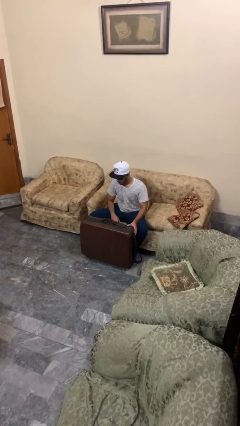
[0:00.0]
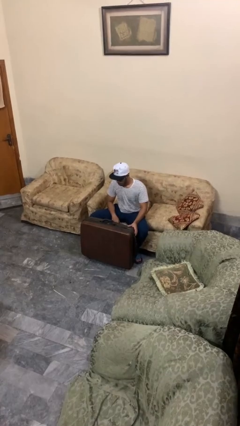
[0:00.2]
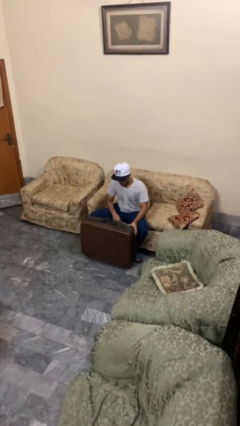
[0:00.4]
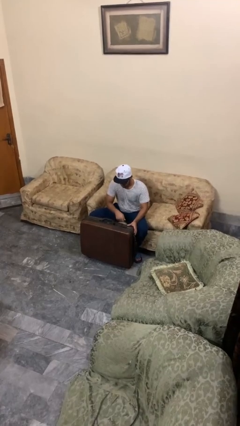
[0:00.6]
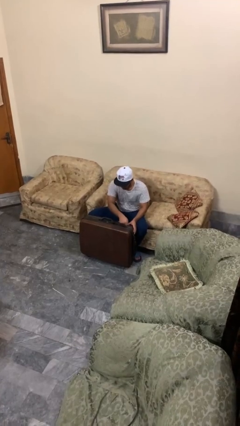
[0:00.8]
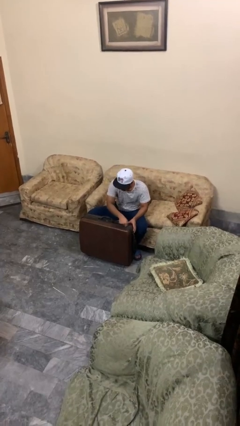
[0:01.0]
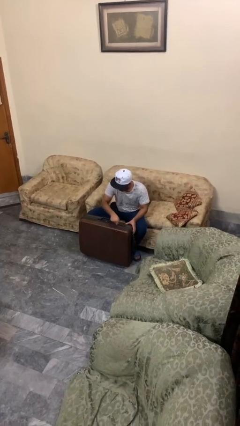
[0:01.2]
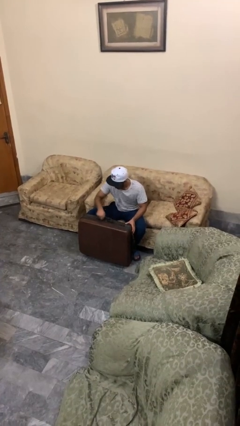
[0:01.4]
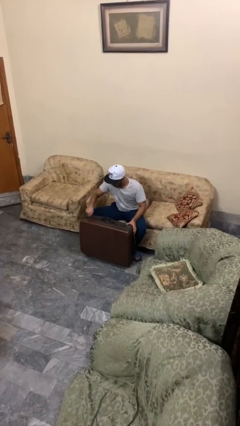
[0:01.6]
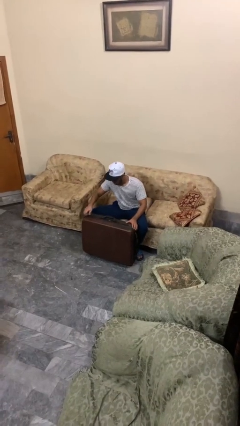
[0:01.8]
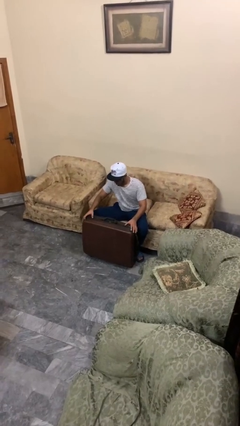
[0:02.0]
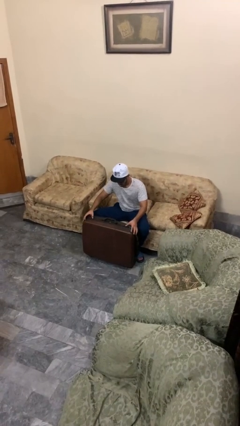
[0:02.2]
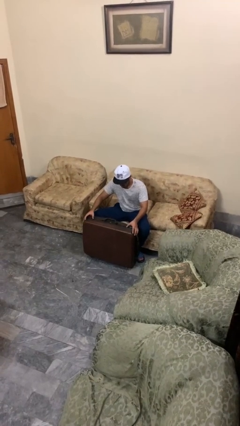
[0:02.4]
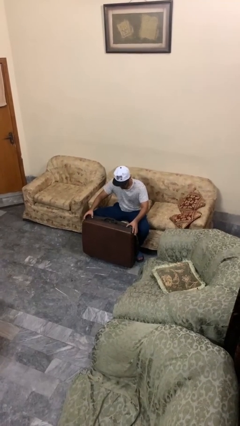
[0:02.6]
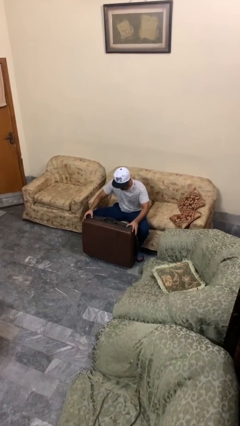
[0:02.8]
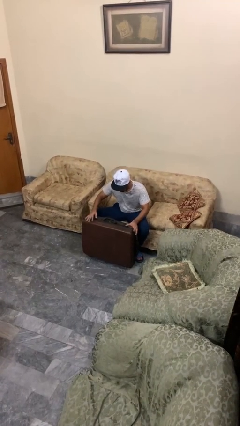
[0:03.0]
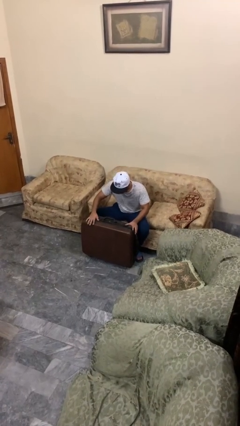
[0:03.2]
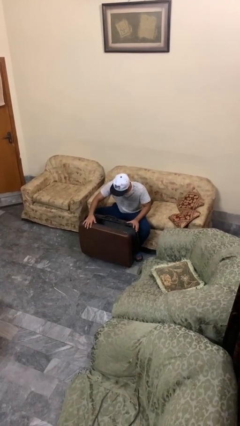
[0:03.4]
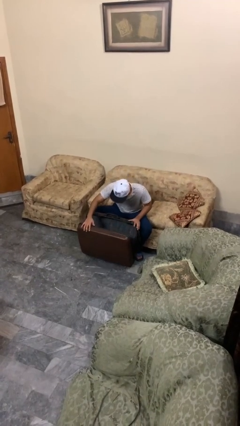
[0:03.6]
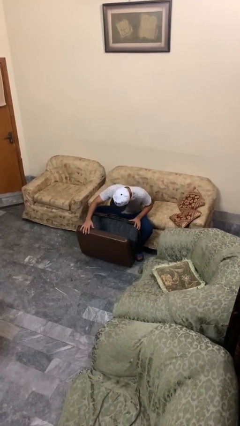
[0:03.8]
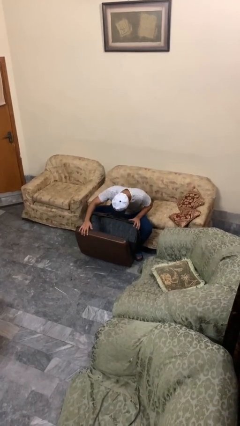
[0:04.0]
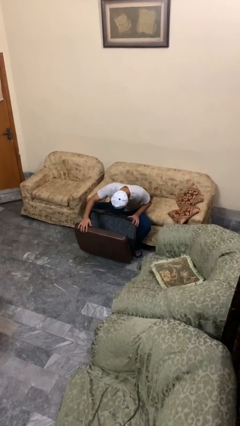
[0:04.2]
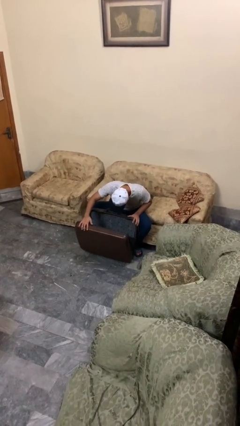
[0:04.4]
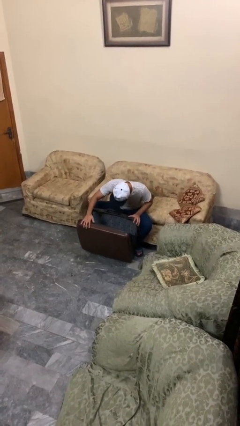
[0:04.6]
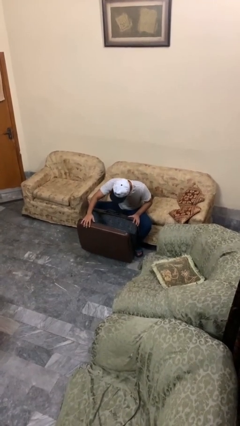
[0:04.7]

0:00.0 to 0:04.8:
person opens suitcase

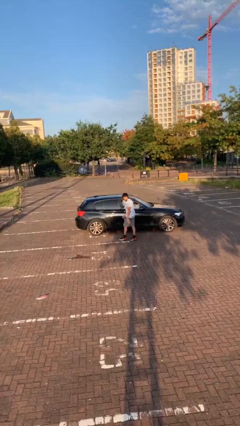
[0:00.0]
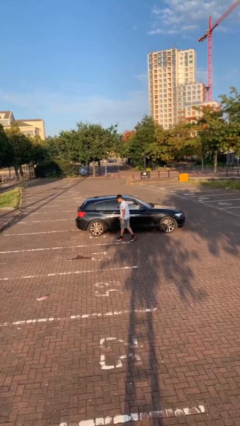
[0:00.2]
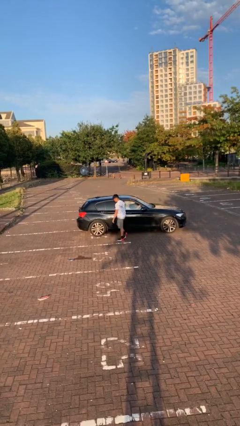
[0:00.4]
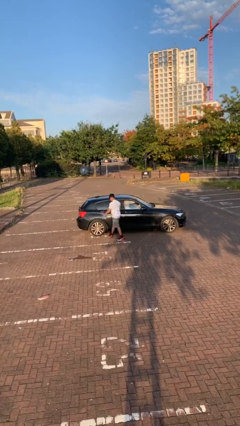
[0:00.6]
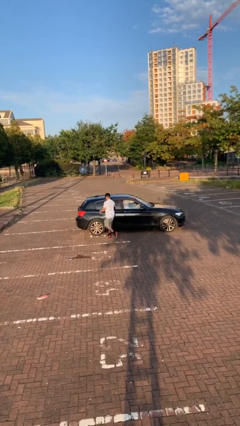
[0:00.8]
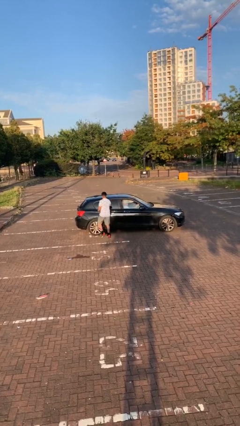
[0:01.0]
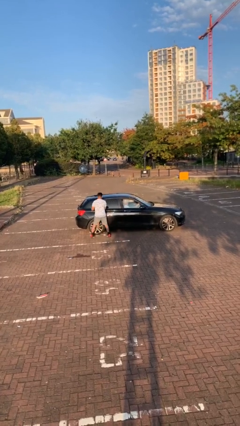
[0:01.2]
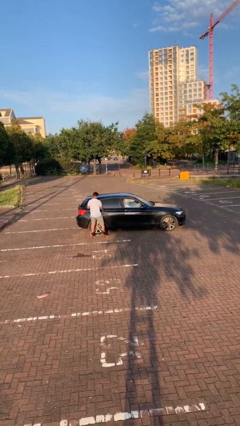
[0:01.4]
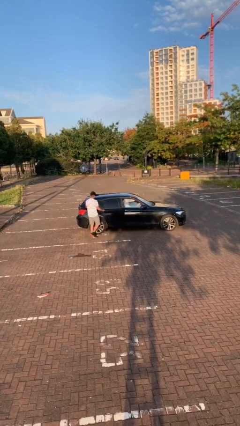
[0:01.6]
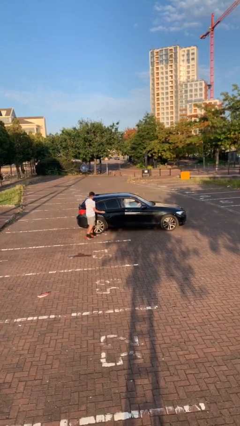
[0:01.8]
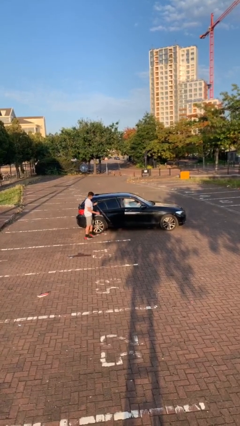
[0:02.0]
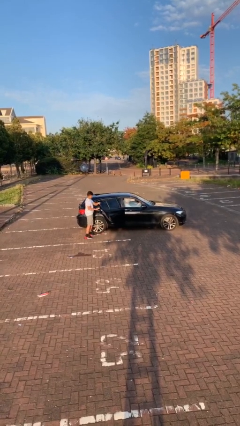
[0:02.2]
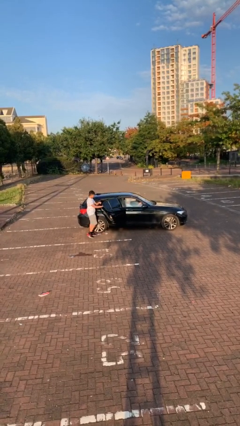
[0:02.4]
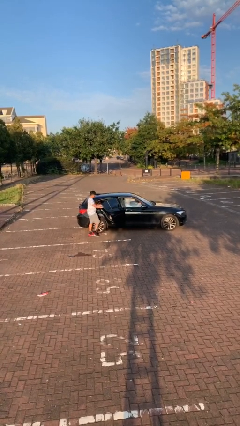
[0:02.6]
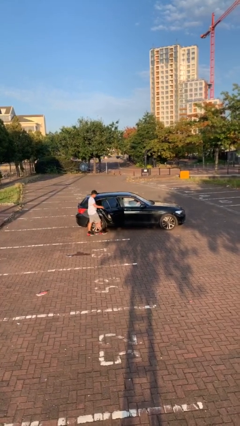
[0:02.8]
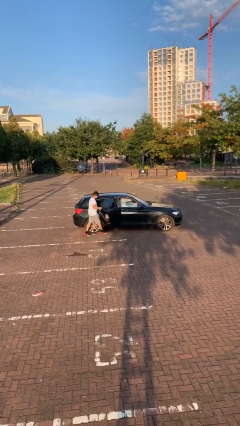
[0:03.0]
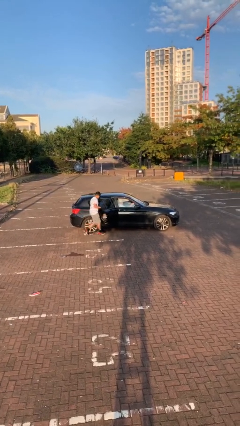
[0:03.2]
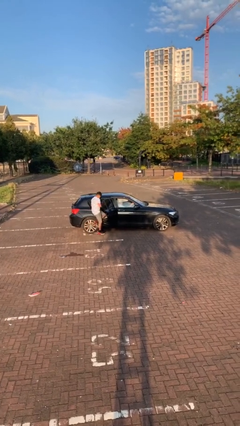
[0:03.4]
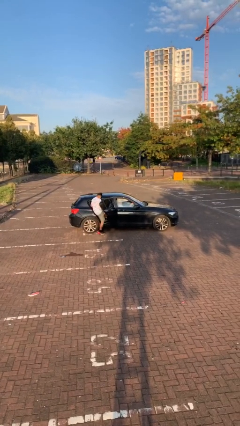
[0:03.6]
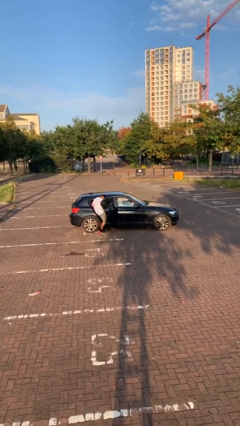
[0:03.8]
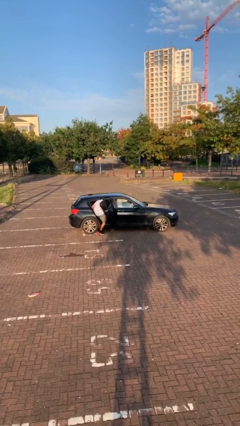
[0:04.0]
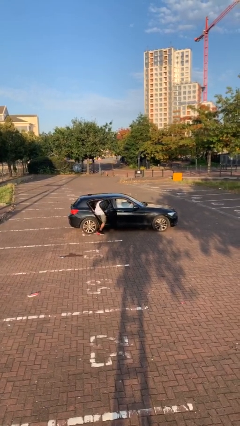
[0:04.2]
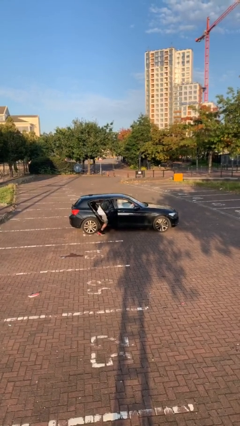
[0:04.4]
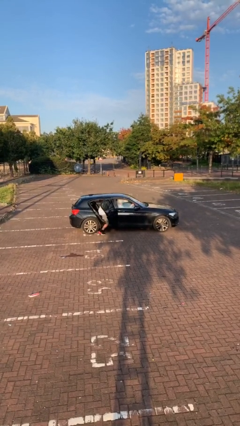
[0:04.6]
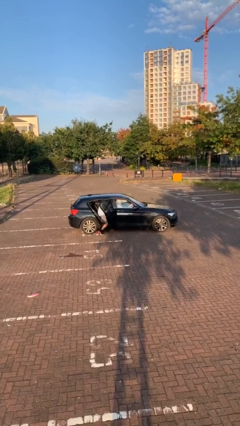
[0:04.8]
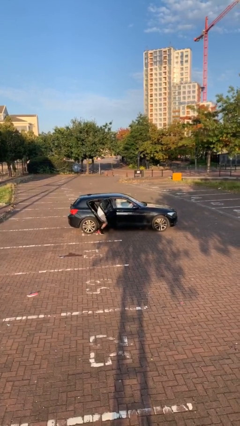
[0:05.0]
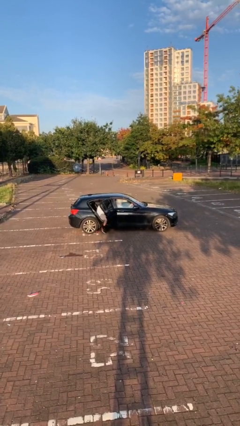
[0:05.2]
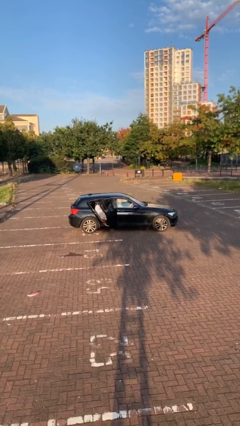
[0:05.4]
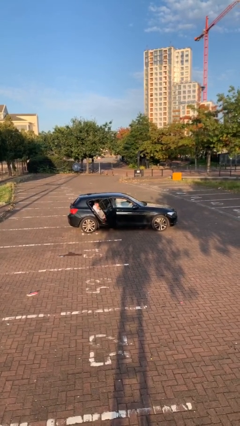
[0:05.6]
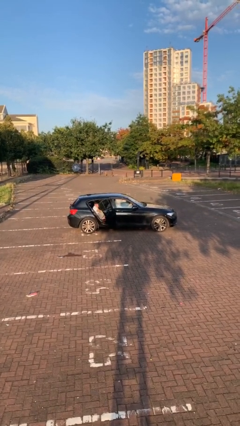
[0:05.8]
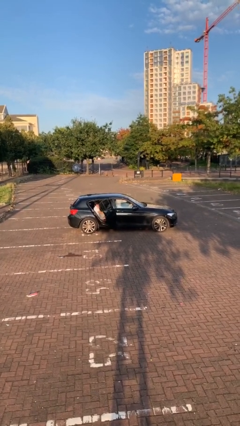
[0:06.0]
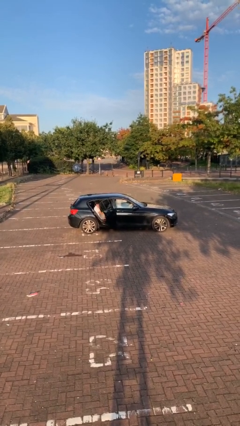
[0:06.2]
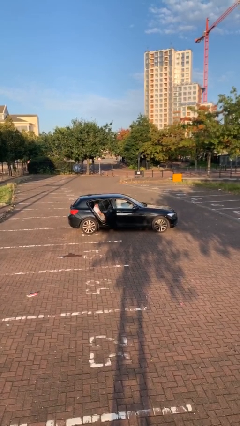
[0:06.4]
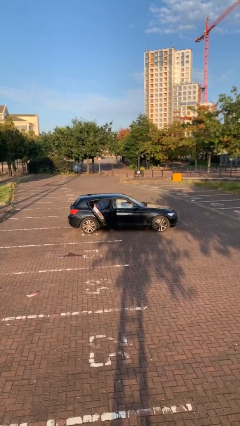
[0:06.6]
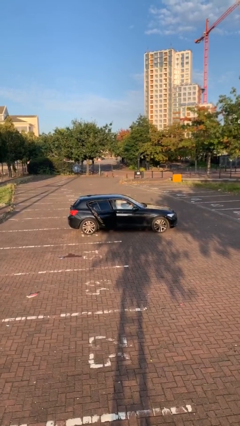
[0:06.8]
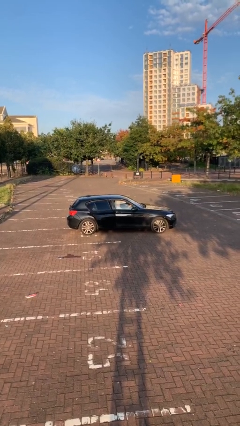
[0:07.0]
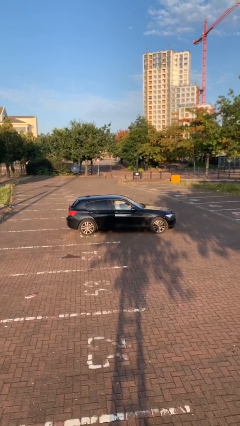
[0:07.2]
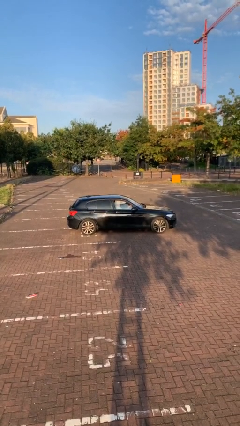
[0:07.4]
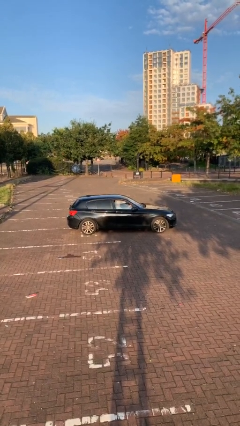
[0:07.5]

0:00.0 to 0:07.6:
car picks up person

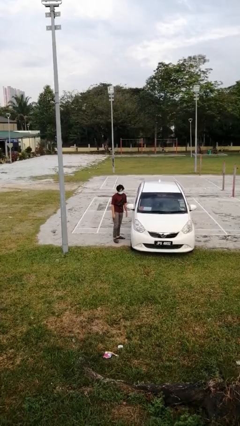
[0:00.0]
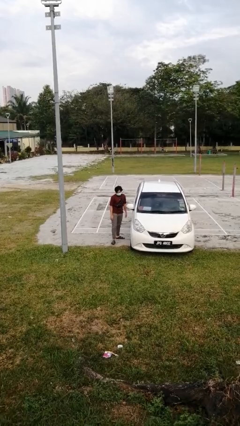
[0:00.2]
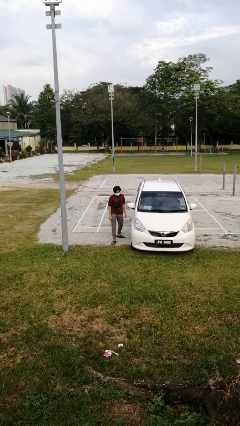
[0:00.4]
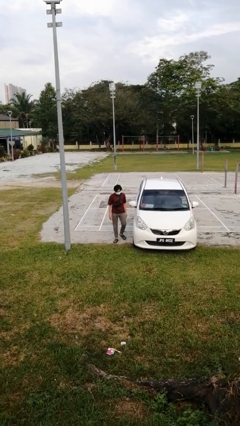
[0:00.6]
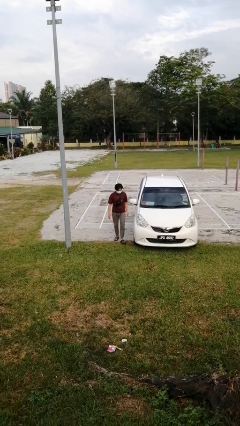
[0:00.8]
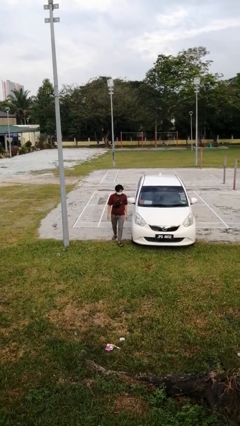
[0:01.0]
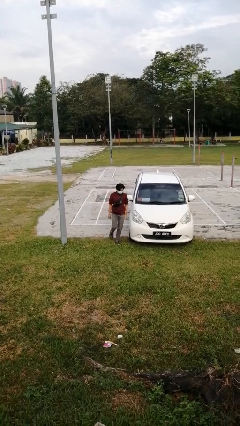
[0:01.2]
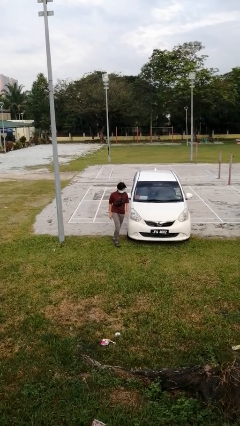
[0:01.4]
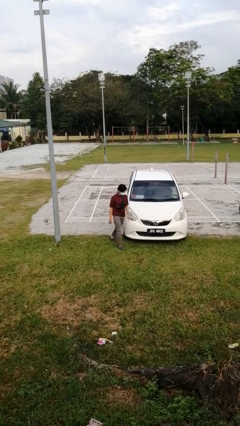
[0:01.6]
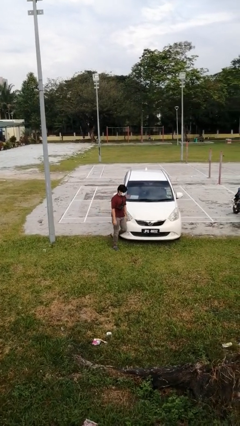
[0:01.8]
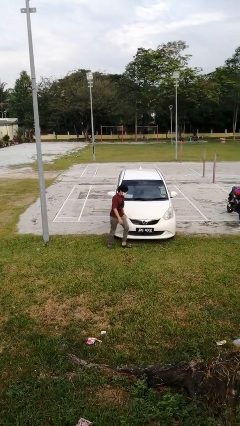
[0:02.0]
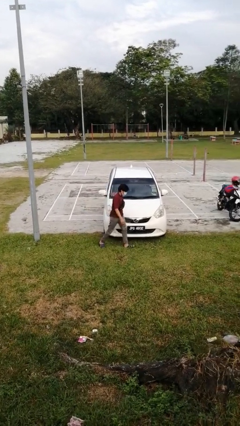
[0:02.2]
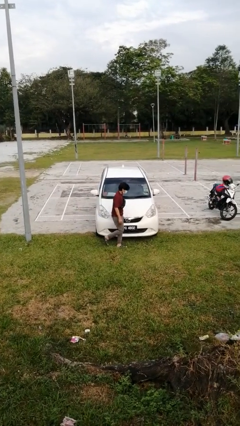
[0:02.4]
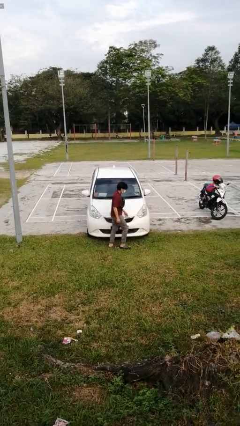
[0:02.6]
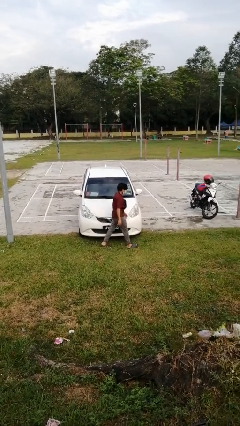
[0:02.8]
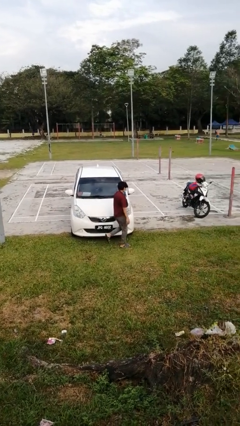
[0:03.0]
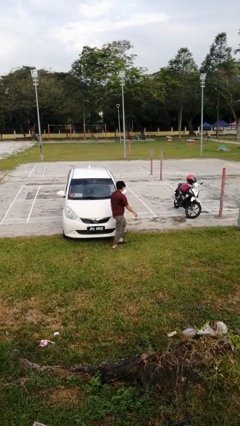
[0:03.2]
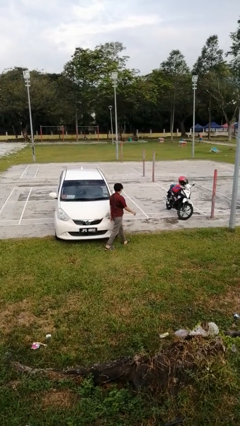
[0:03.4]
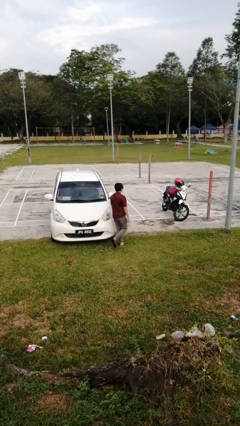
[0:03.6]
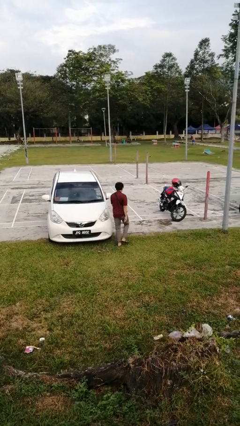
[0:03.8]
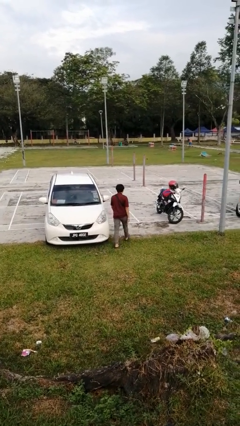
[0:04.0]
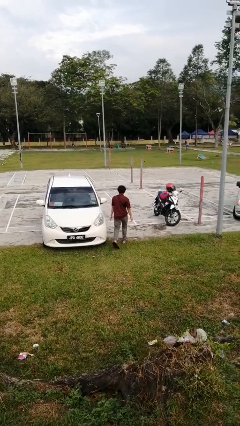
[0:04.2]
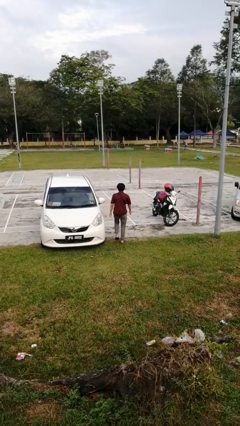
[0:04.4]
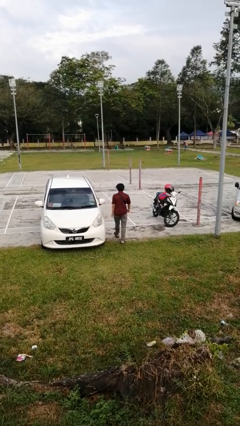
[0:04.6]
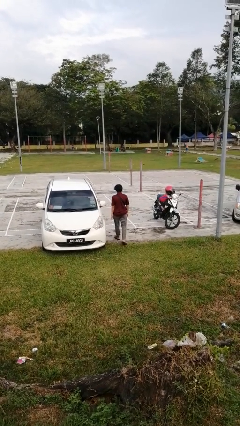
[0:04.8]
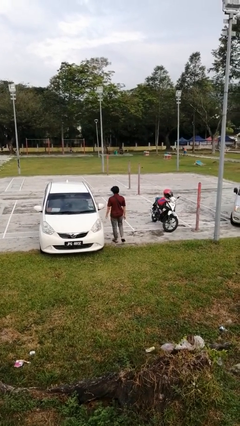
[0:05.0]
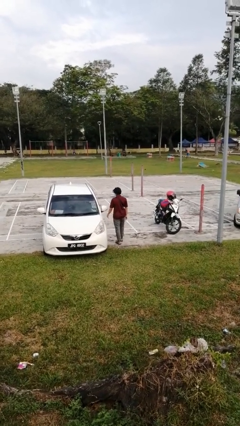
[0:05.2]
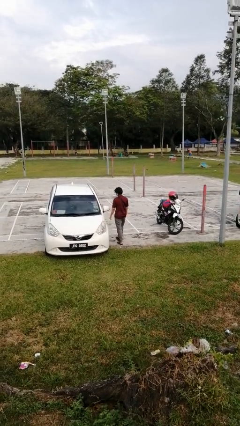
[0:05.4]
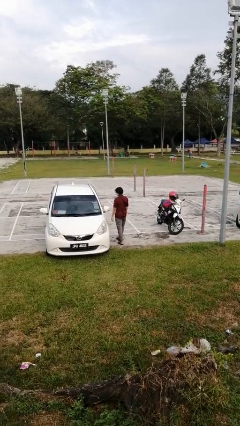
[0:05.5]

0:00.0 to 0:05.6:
person walks around car
